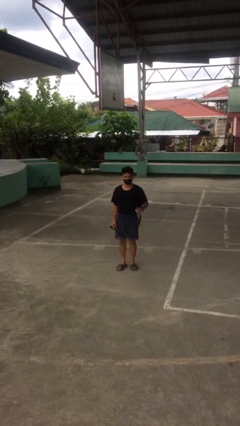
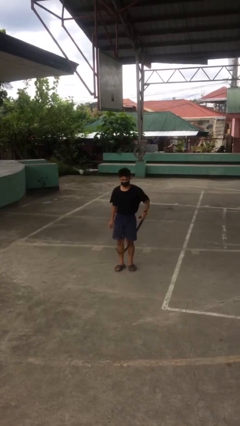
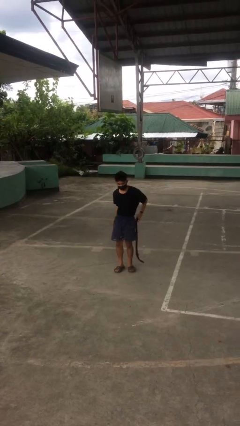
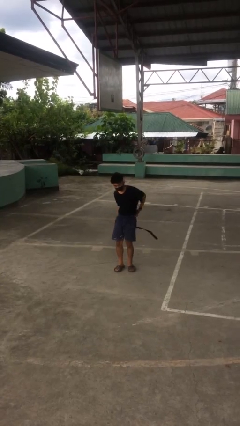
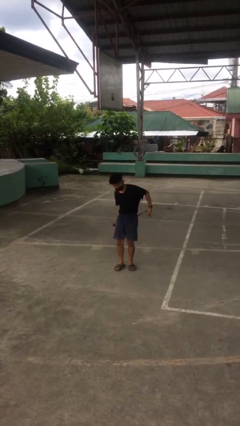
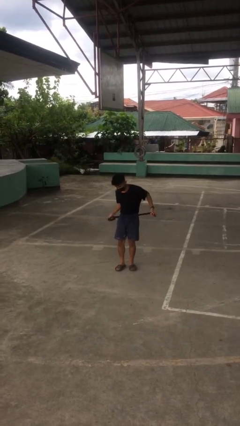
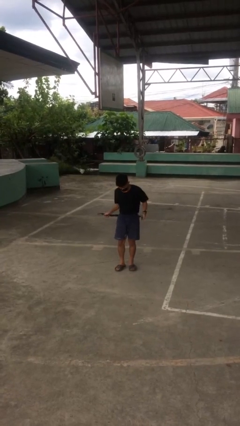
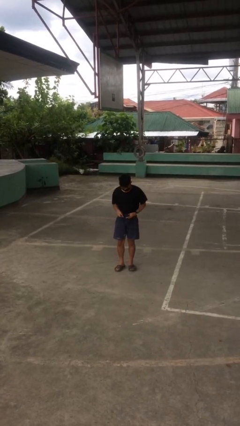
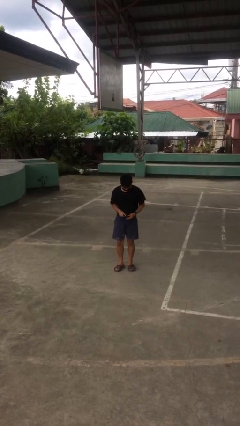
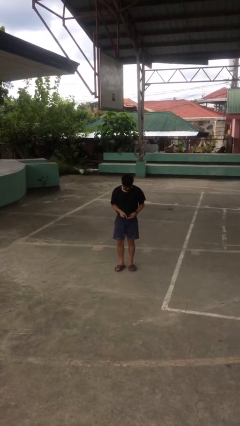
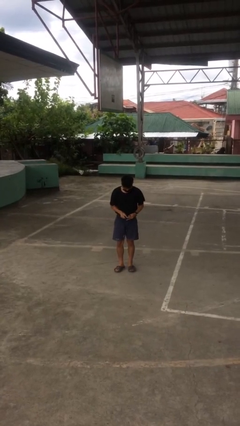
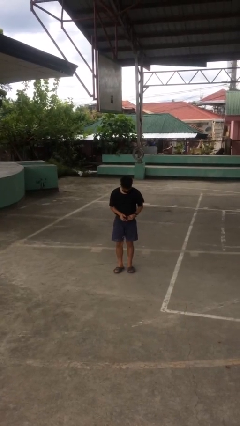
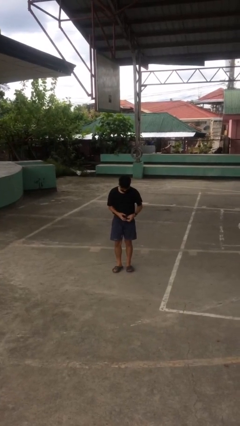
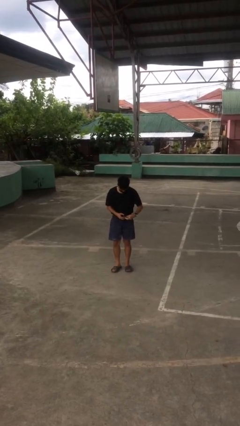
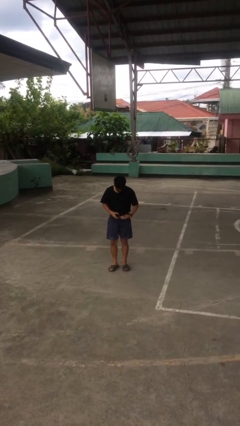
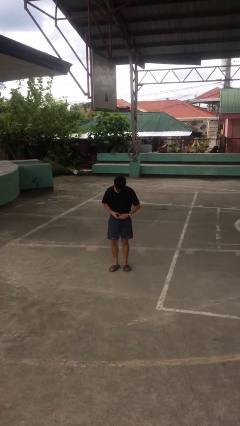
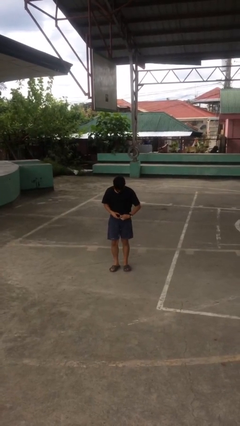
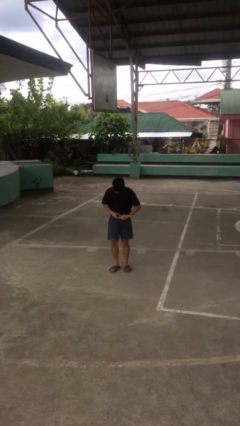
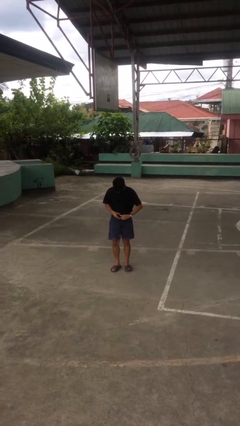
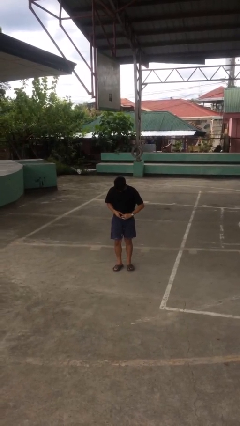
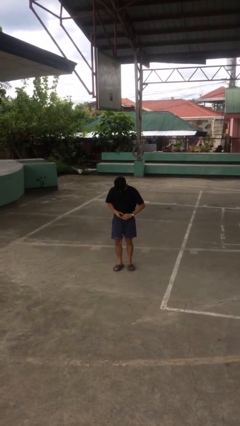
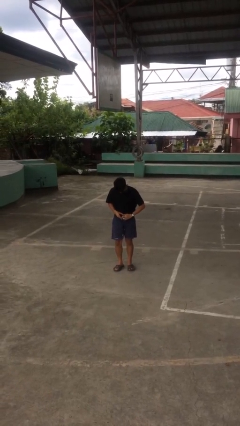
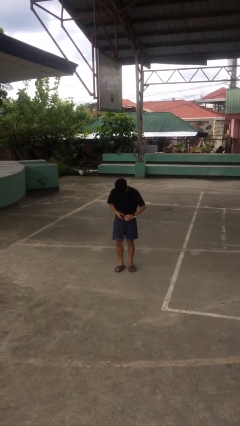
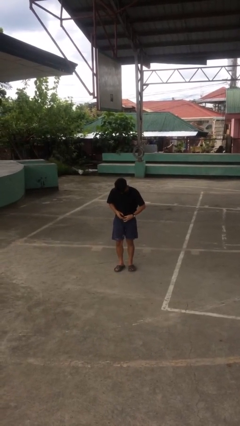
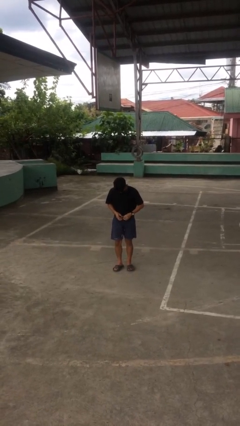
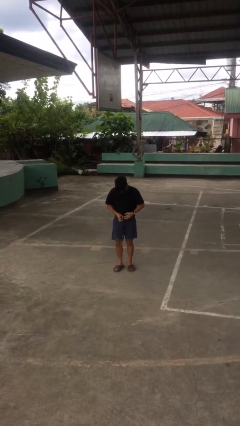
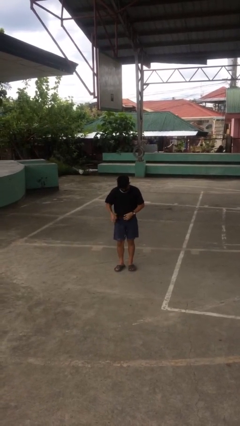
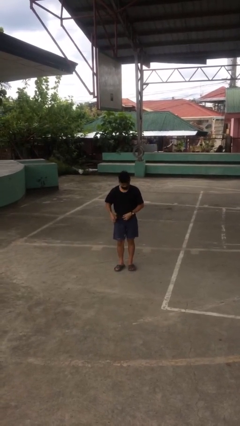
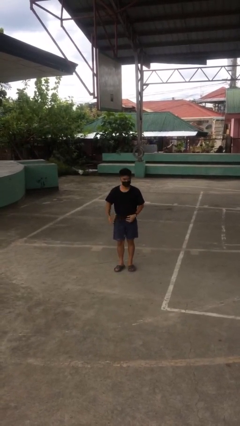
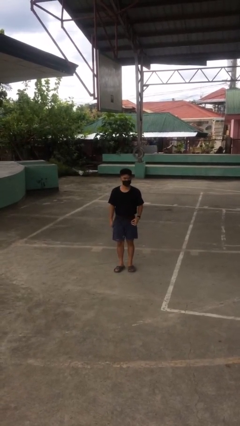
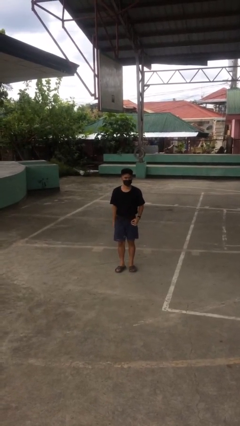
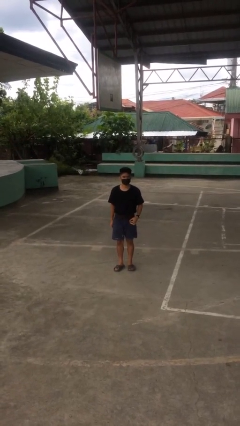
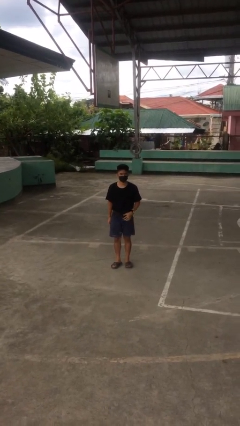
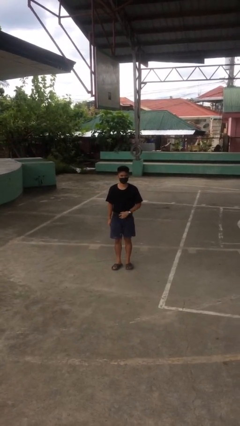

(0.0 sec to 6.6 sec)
person puts on belt

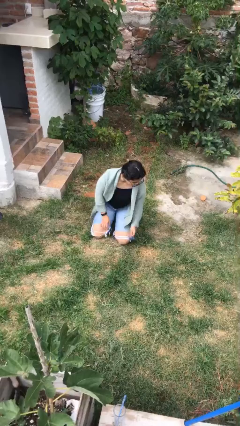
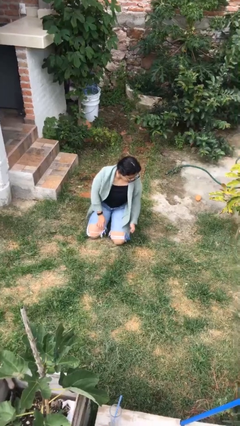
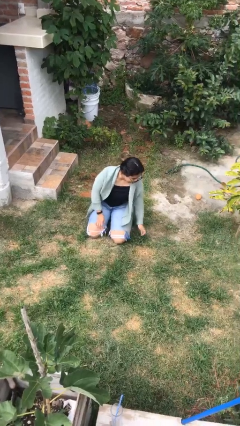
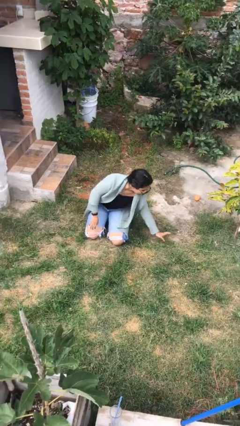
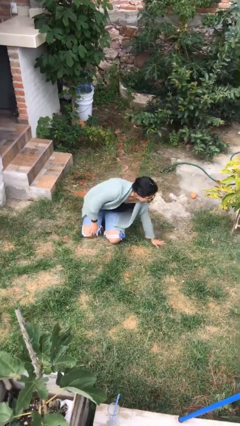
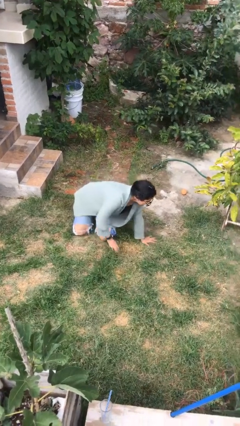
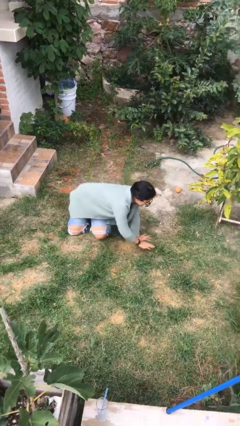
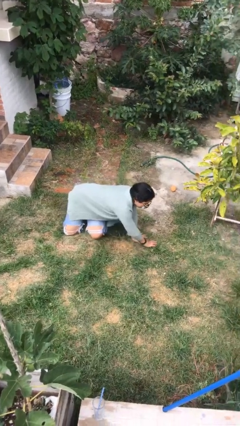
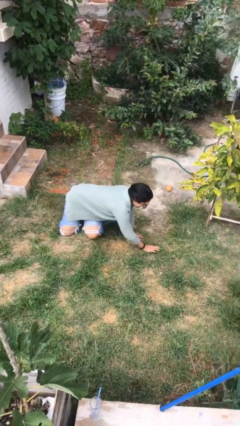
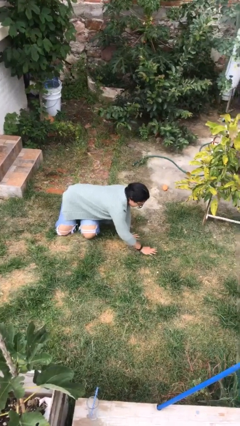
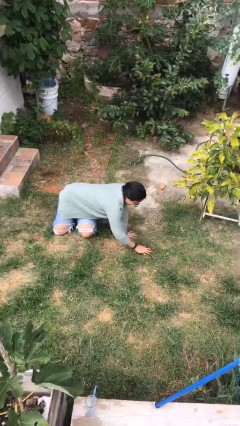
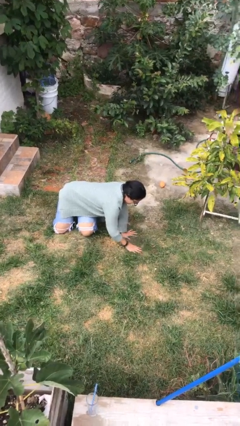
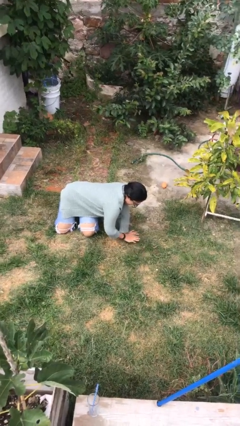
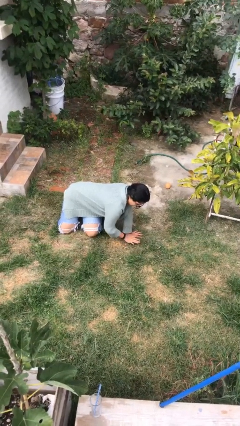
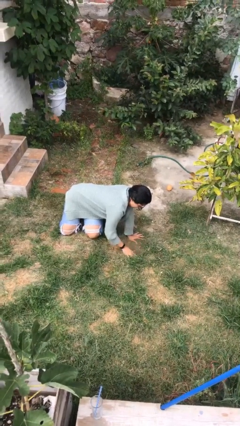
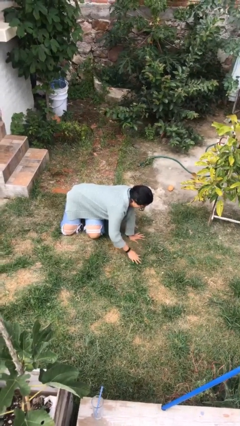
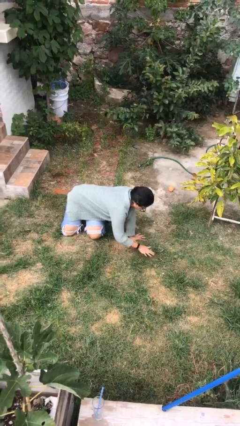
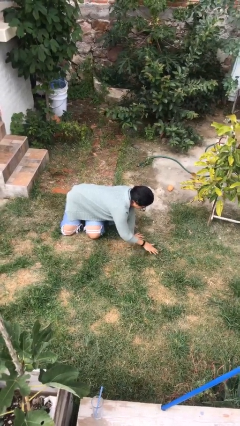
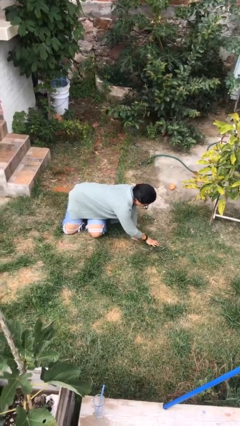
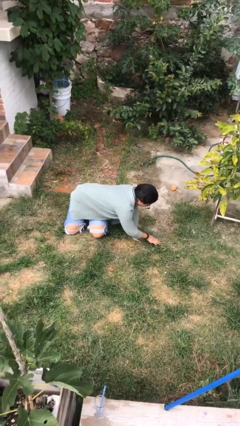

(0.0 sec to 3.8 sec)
person crawls

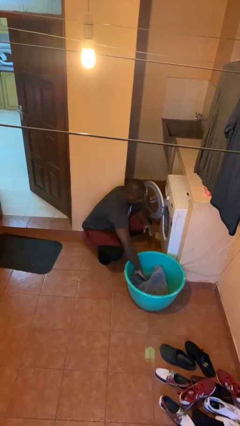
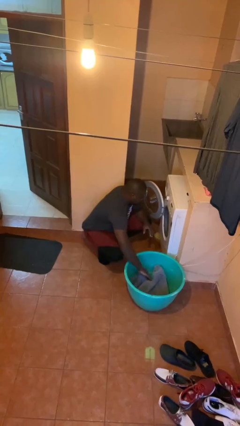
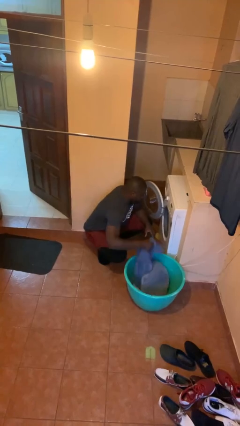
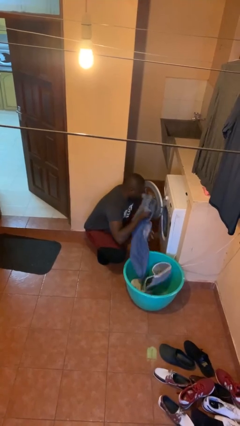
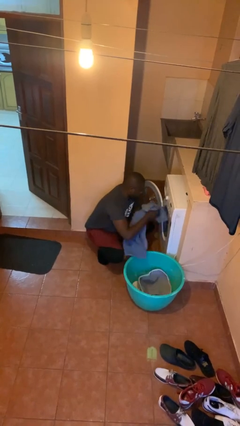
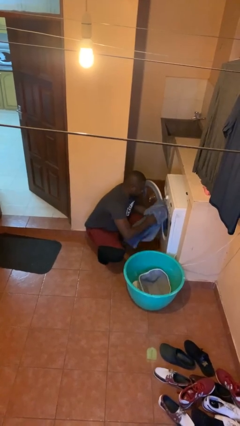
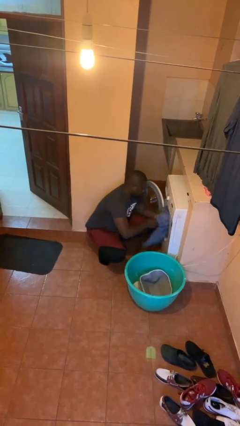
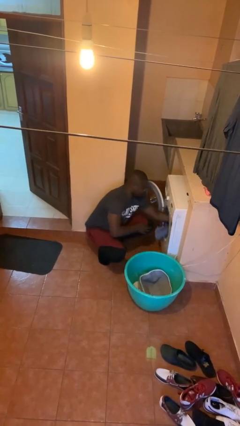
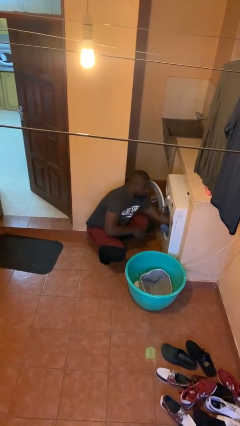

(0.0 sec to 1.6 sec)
person loads clotheswasher

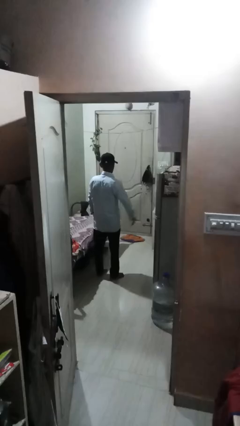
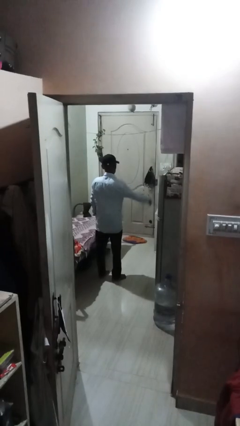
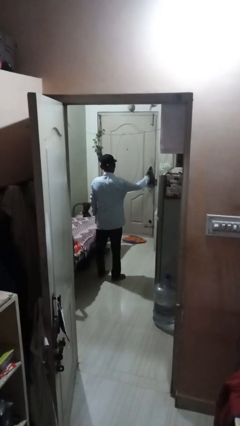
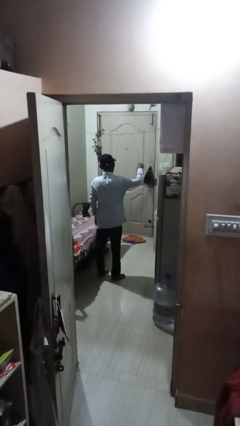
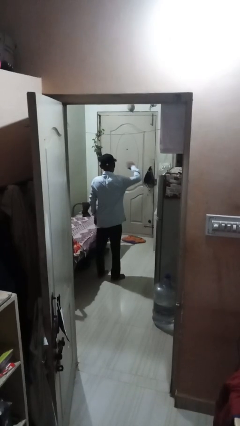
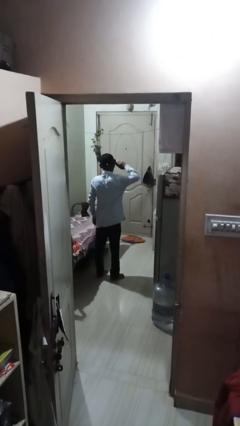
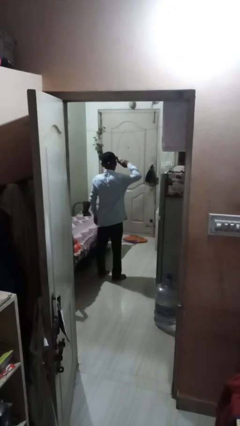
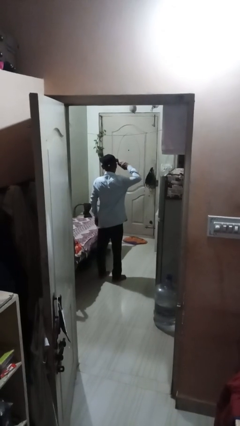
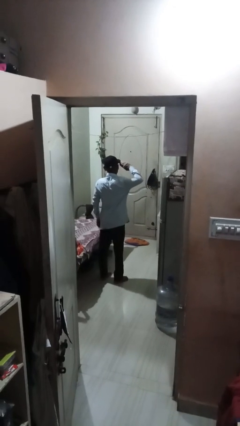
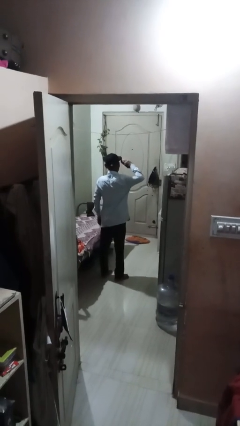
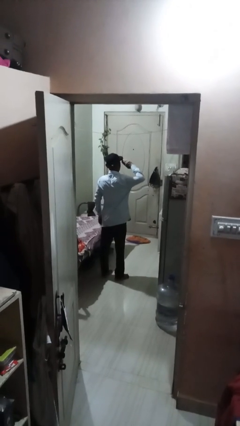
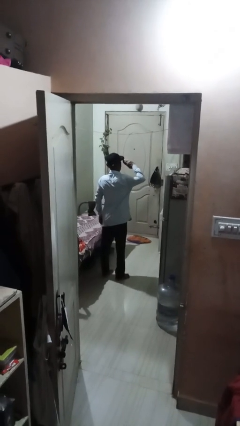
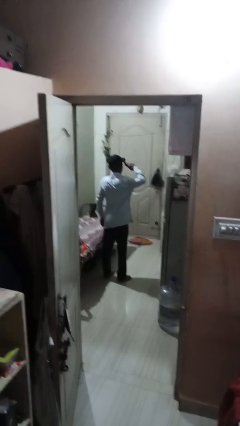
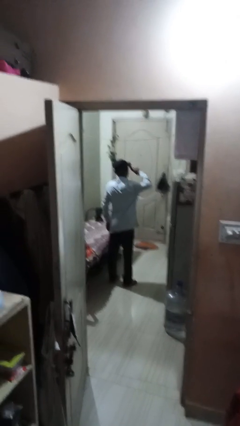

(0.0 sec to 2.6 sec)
person salutes

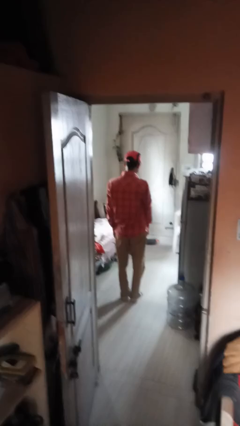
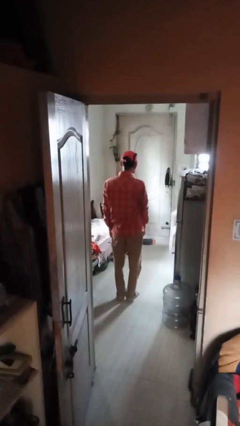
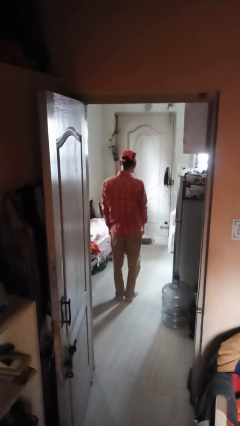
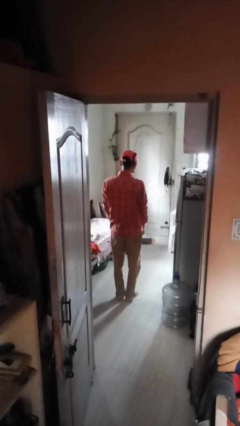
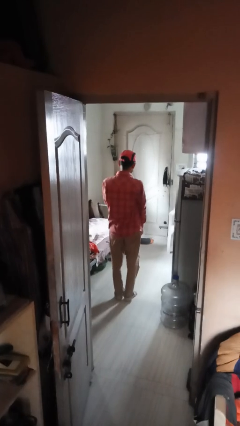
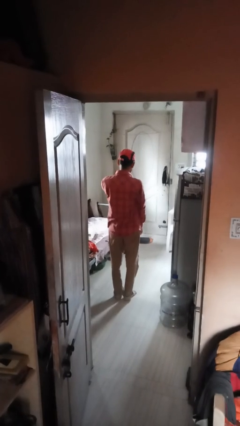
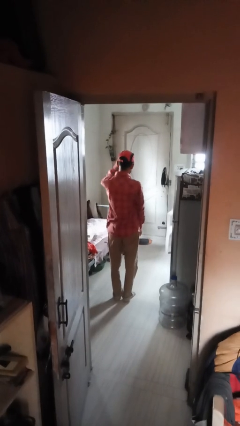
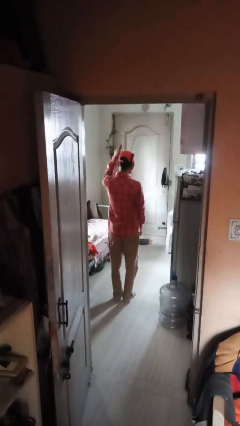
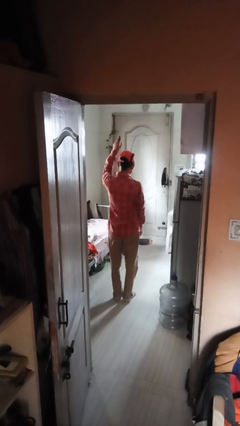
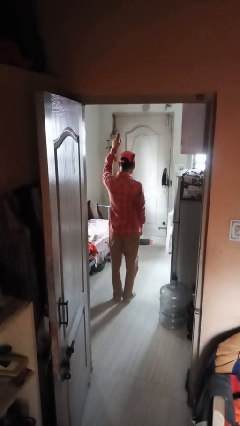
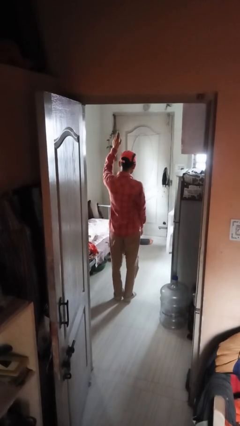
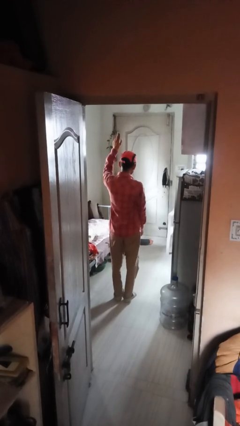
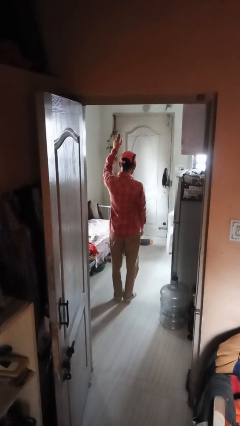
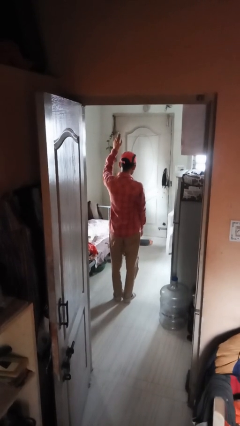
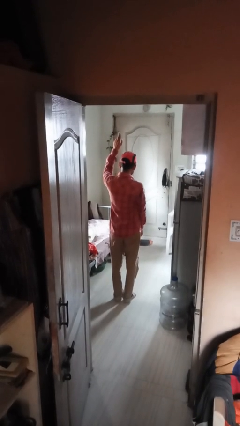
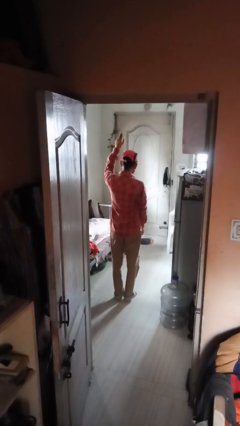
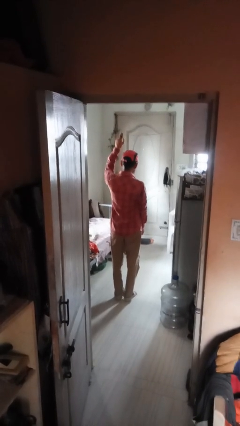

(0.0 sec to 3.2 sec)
person gestures swipe up
